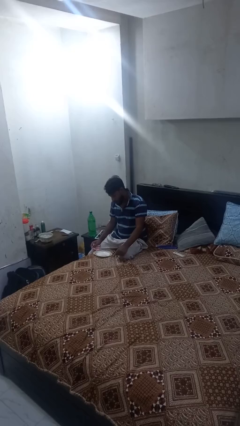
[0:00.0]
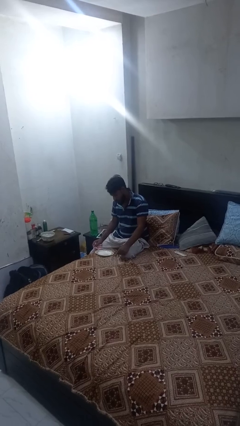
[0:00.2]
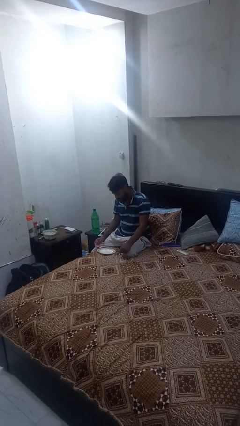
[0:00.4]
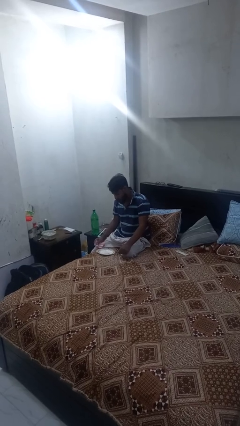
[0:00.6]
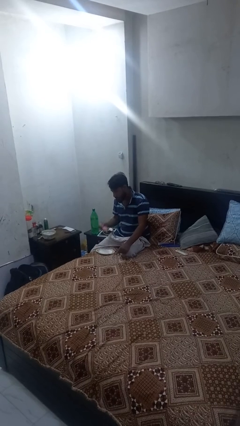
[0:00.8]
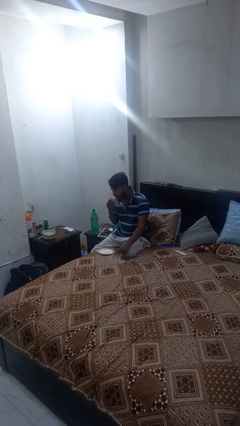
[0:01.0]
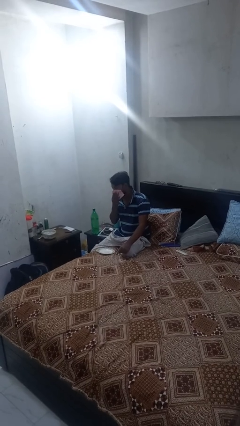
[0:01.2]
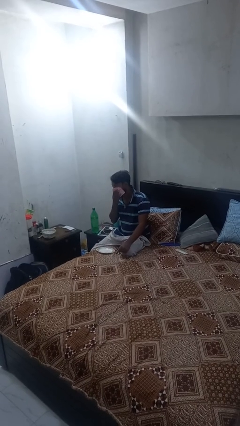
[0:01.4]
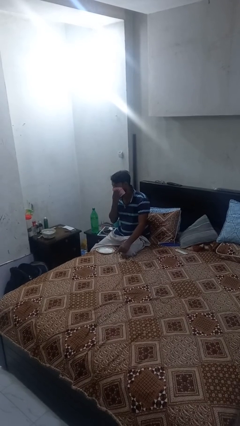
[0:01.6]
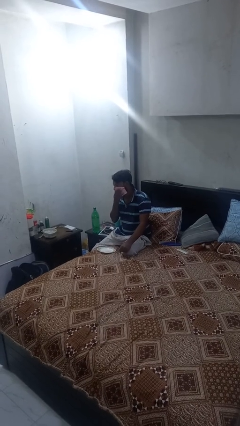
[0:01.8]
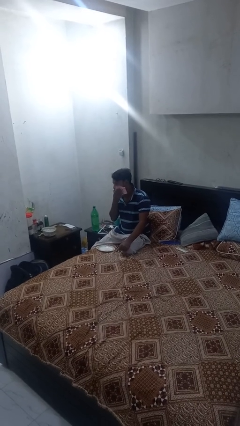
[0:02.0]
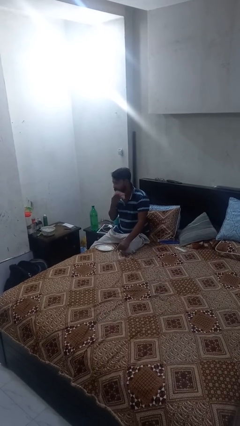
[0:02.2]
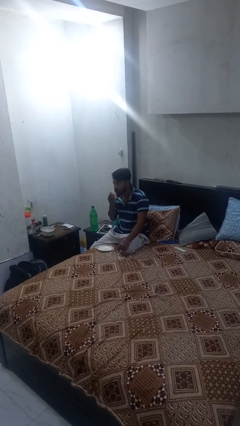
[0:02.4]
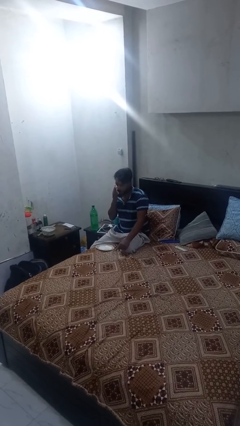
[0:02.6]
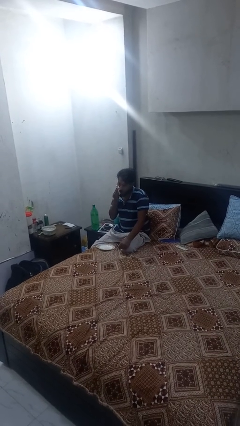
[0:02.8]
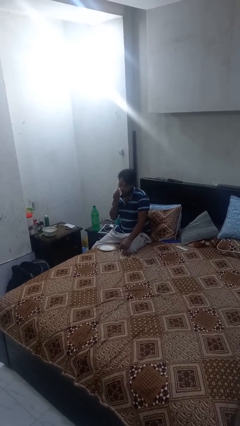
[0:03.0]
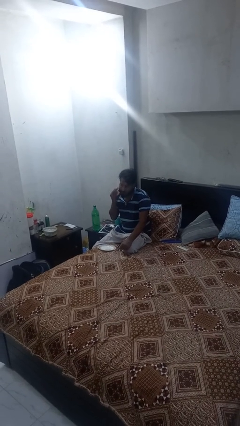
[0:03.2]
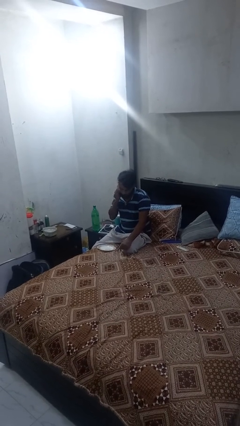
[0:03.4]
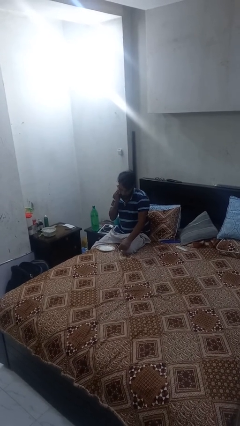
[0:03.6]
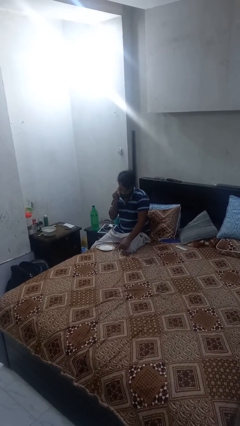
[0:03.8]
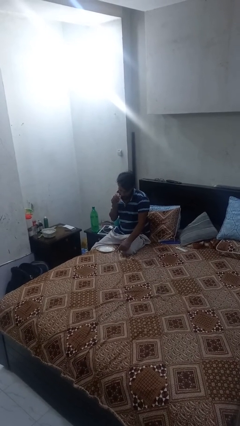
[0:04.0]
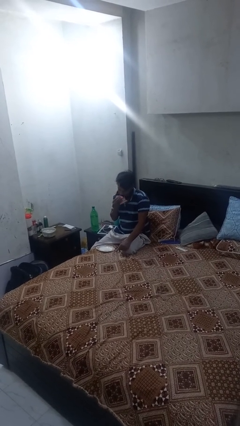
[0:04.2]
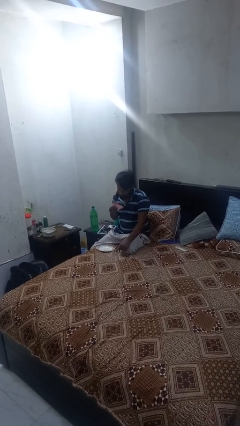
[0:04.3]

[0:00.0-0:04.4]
person wipes mouth with napkin

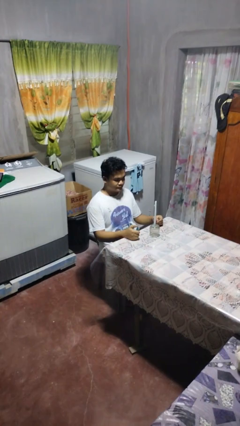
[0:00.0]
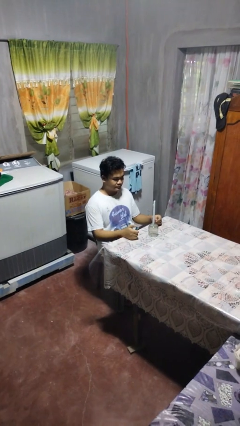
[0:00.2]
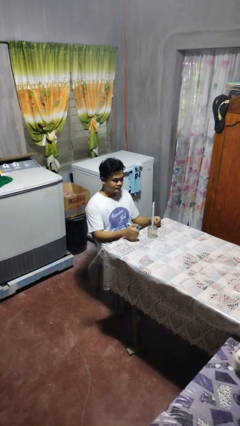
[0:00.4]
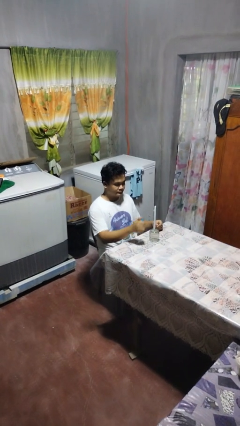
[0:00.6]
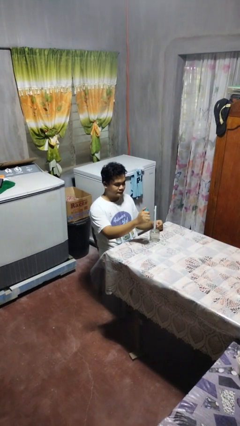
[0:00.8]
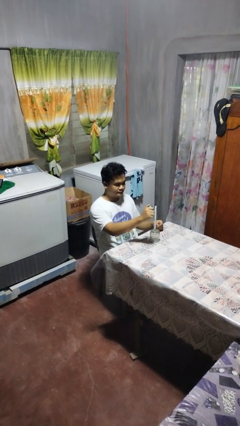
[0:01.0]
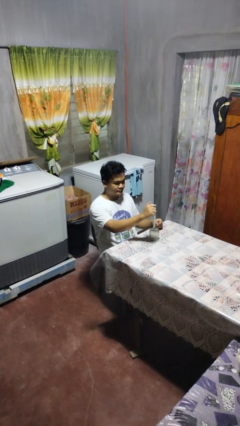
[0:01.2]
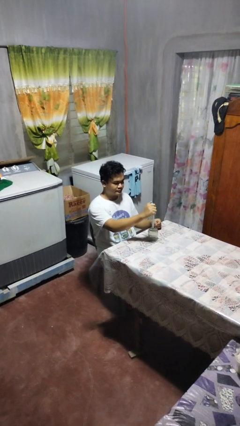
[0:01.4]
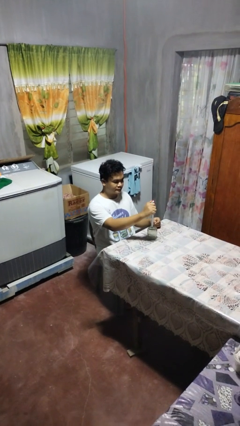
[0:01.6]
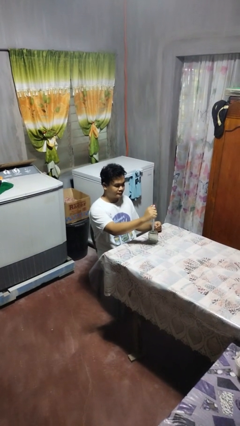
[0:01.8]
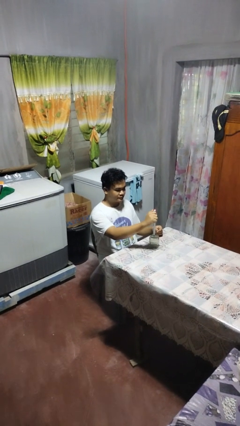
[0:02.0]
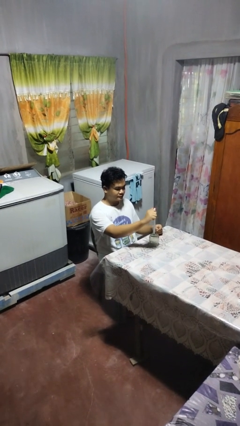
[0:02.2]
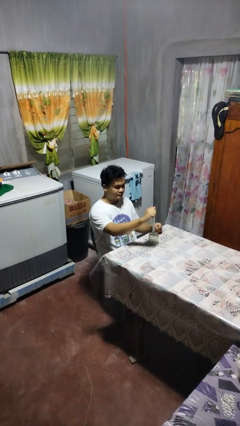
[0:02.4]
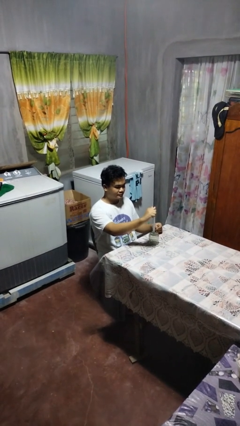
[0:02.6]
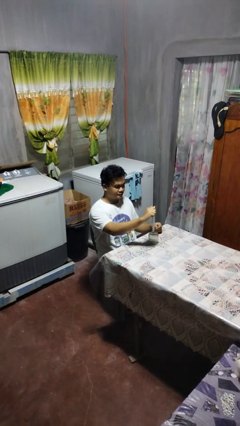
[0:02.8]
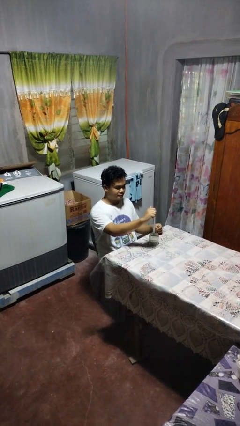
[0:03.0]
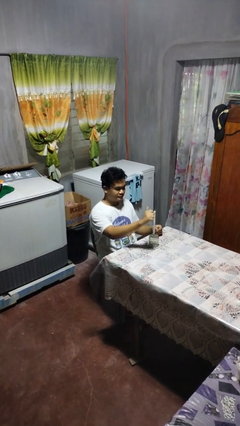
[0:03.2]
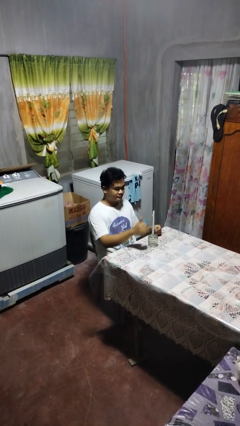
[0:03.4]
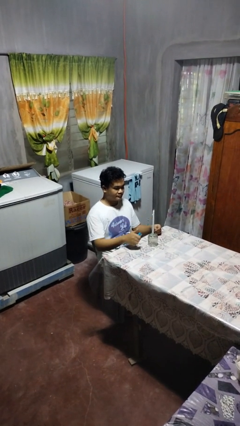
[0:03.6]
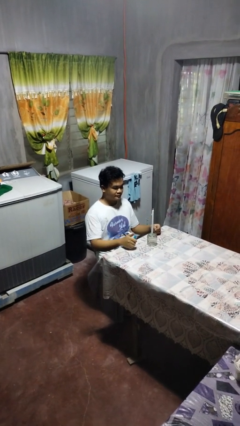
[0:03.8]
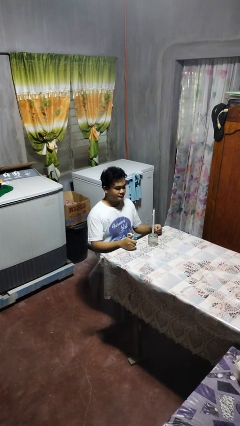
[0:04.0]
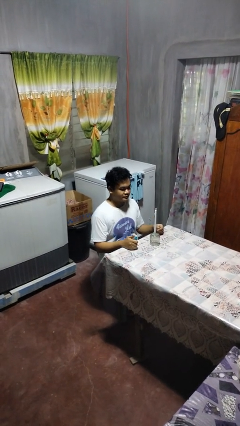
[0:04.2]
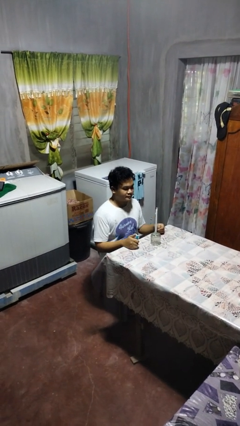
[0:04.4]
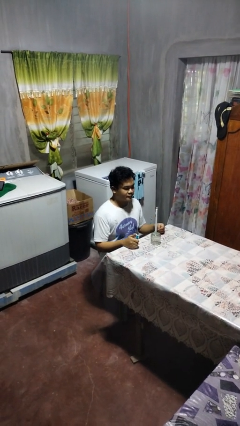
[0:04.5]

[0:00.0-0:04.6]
person lights candle

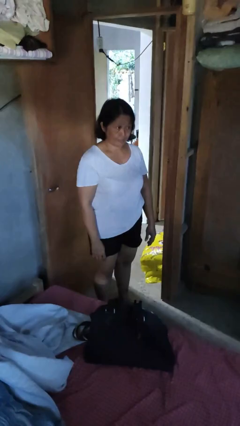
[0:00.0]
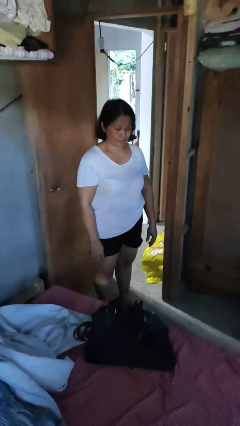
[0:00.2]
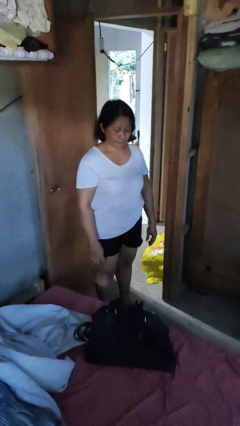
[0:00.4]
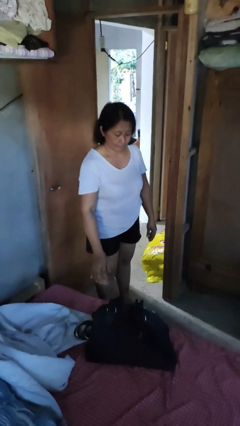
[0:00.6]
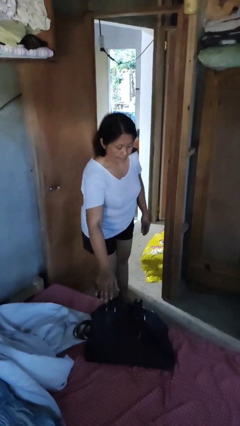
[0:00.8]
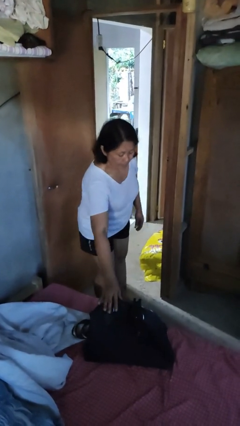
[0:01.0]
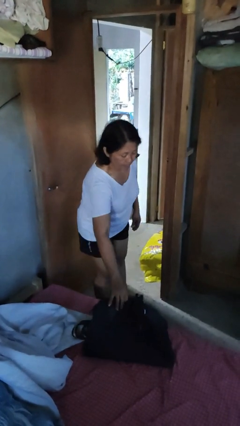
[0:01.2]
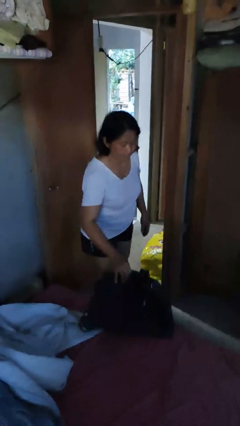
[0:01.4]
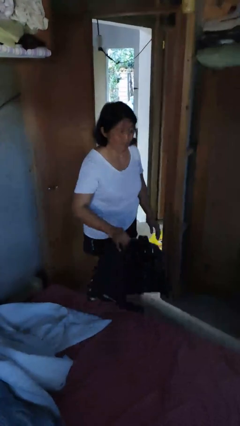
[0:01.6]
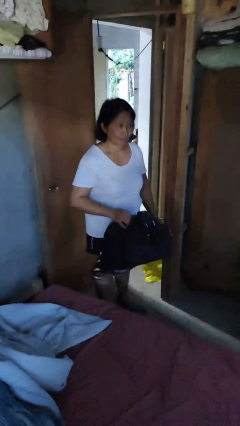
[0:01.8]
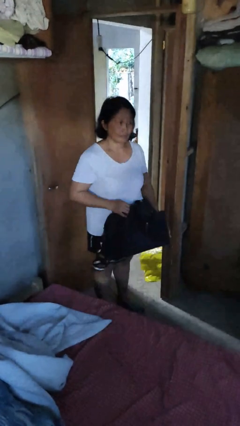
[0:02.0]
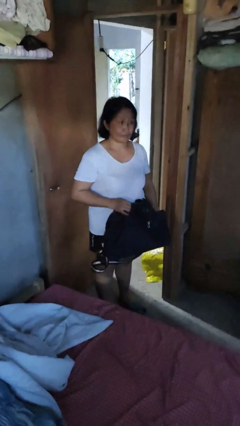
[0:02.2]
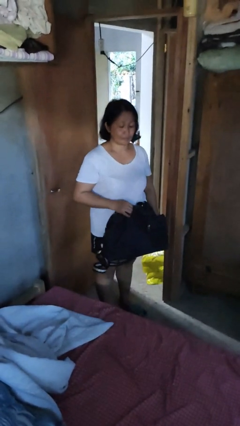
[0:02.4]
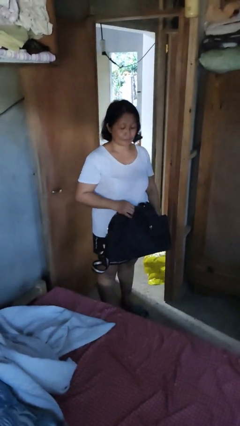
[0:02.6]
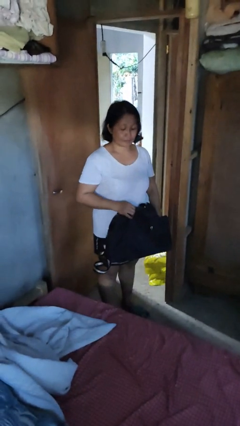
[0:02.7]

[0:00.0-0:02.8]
person picks up object from bed

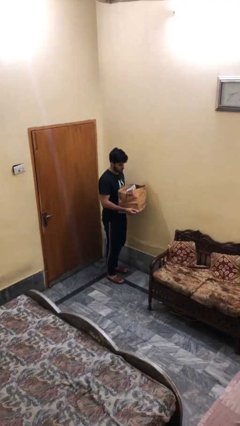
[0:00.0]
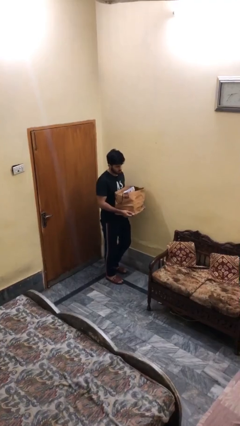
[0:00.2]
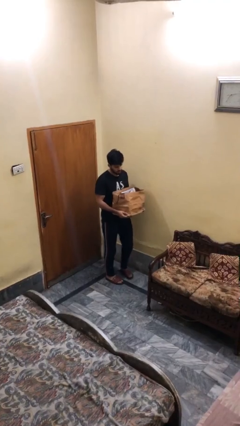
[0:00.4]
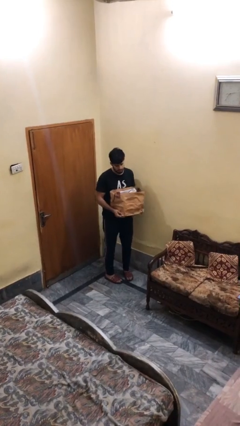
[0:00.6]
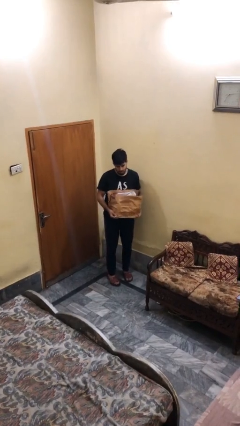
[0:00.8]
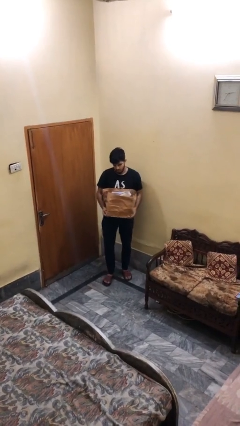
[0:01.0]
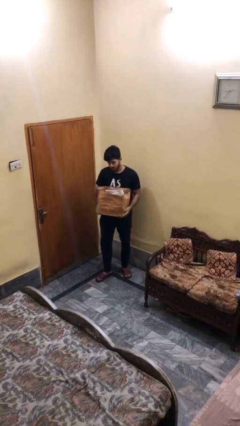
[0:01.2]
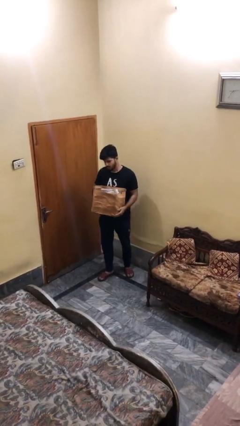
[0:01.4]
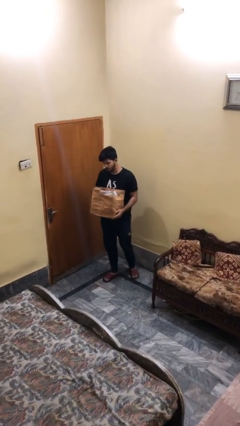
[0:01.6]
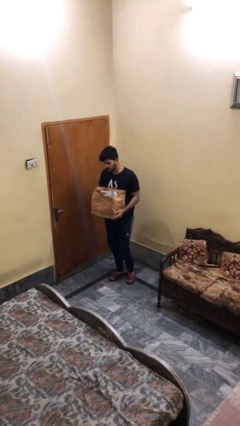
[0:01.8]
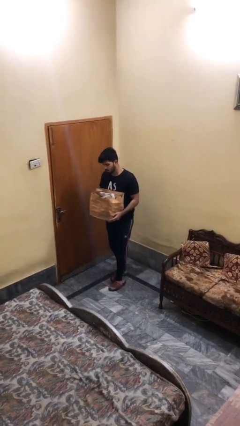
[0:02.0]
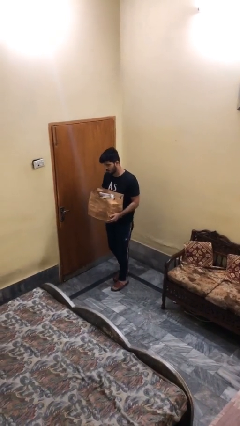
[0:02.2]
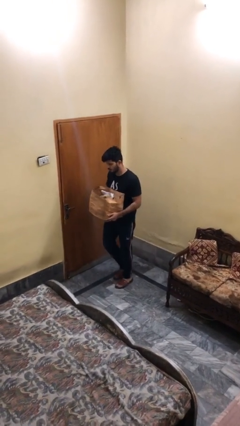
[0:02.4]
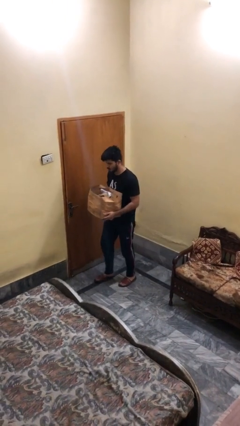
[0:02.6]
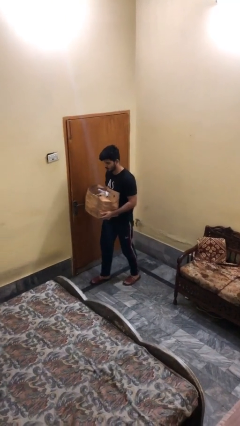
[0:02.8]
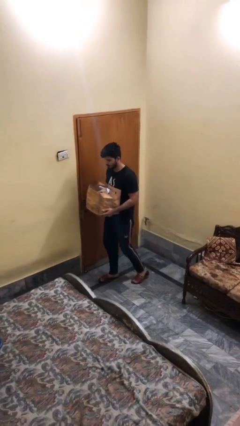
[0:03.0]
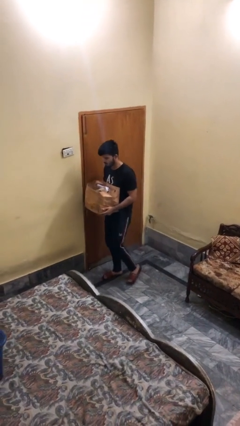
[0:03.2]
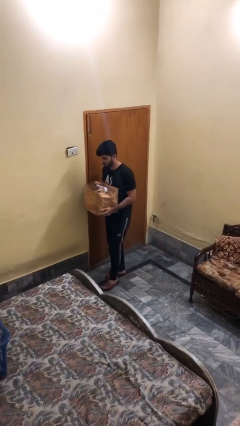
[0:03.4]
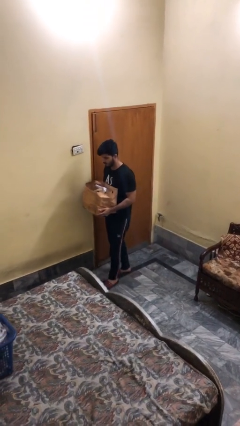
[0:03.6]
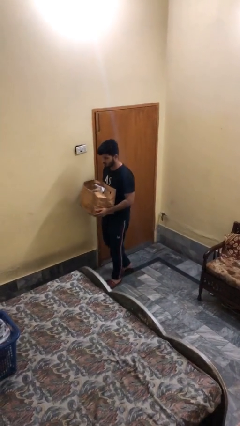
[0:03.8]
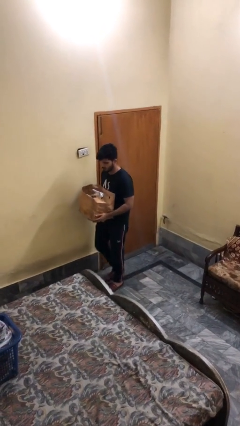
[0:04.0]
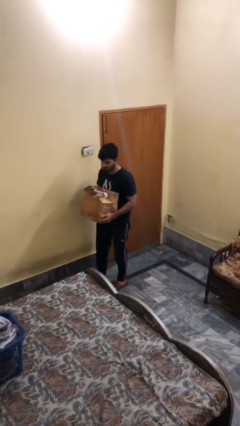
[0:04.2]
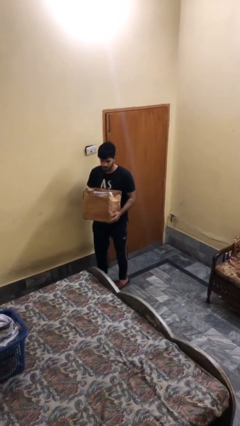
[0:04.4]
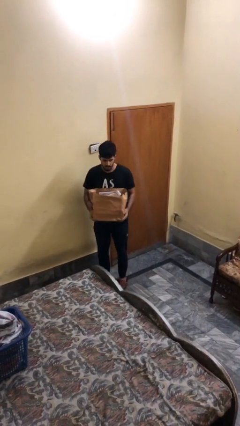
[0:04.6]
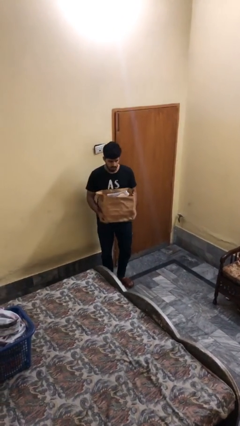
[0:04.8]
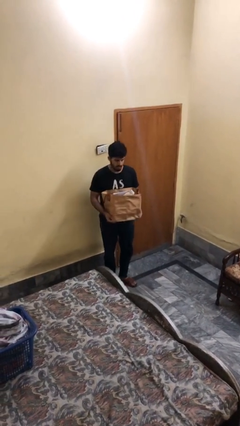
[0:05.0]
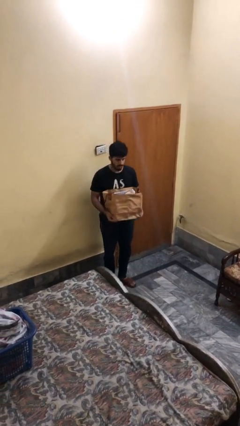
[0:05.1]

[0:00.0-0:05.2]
person carries groceries

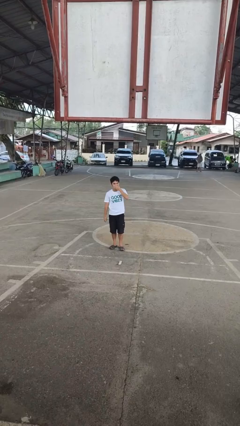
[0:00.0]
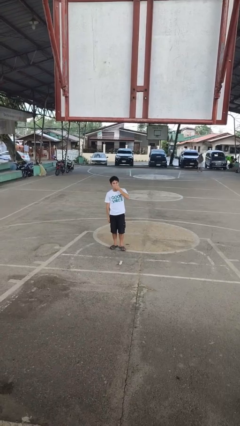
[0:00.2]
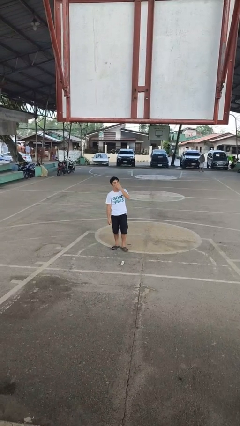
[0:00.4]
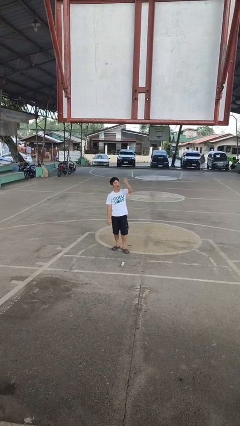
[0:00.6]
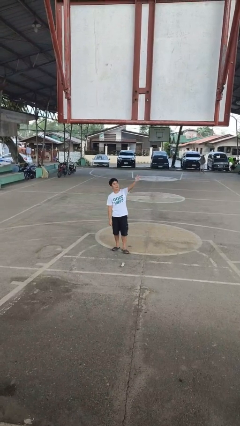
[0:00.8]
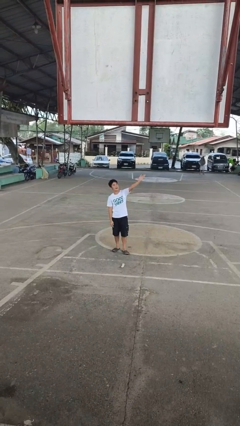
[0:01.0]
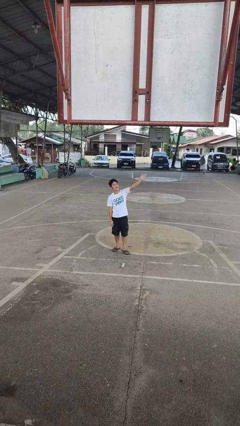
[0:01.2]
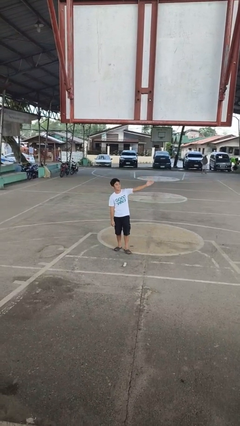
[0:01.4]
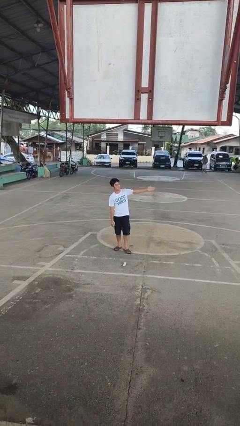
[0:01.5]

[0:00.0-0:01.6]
person gestures blow kiss
